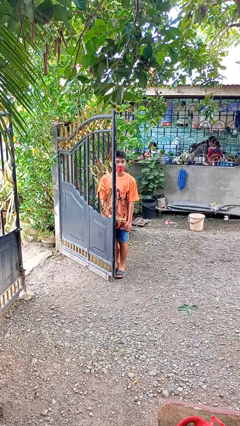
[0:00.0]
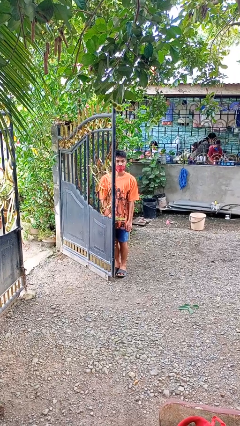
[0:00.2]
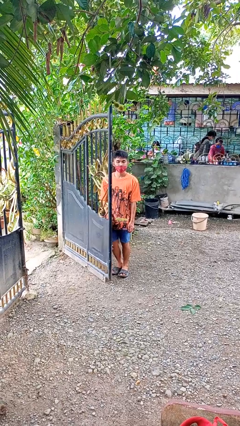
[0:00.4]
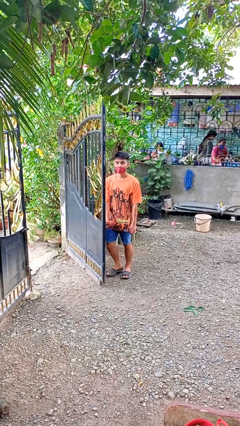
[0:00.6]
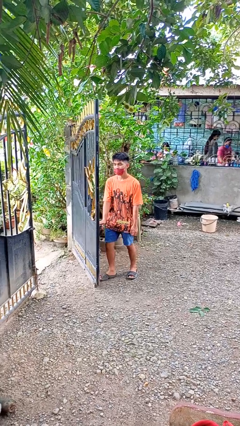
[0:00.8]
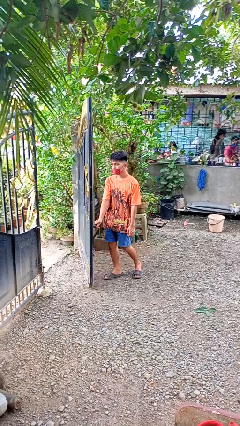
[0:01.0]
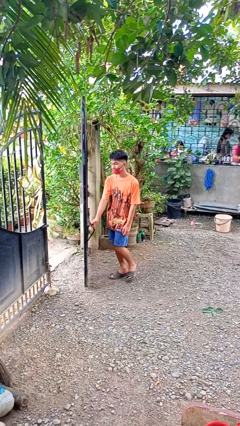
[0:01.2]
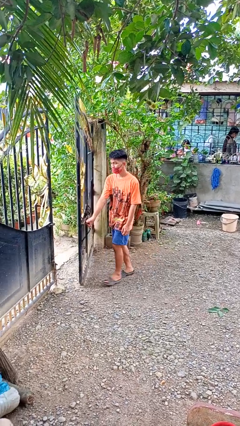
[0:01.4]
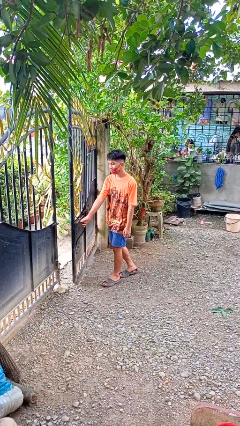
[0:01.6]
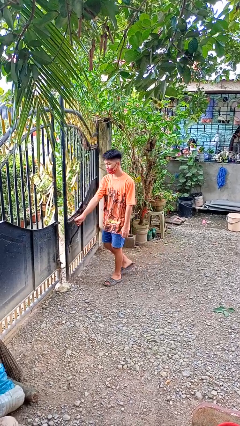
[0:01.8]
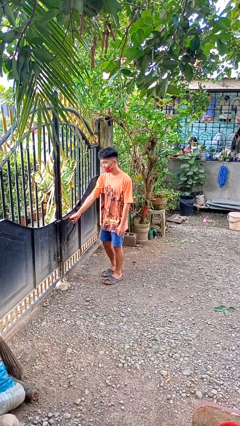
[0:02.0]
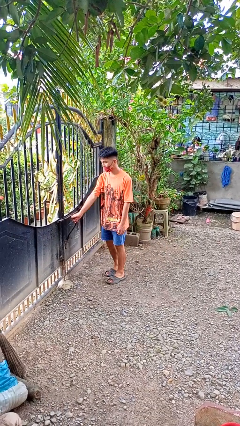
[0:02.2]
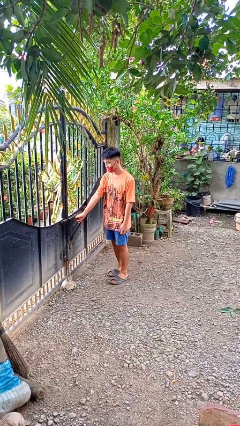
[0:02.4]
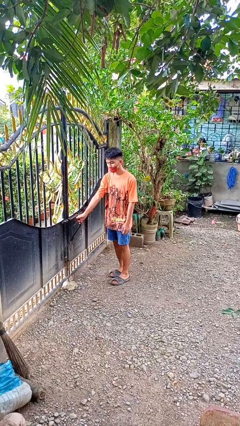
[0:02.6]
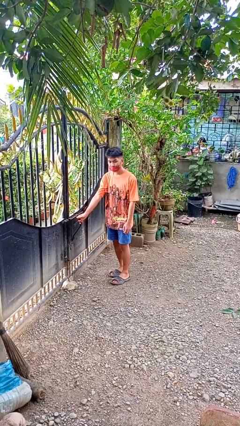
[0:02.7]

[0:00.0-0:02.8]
person closes gate

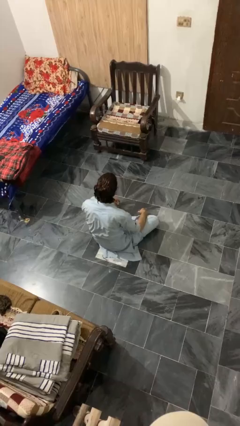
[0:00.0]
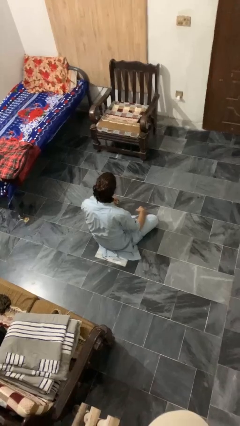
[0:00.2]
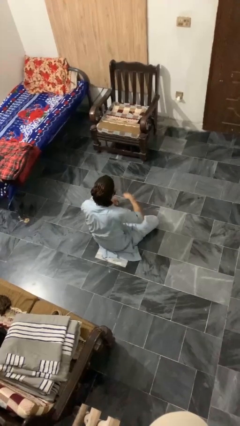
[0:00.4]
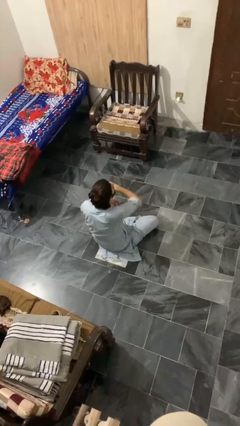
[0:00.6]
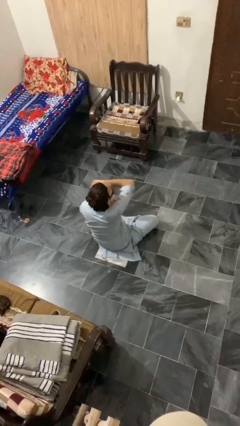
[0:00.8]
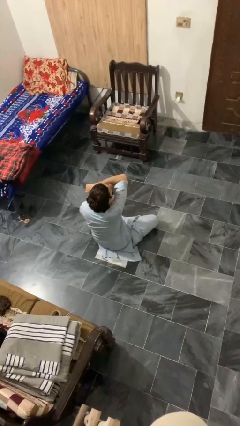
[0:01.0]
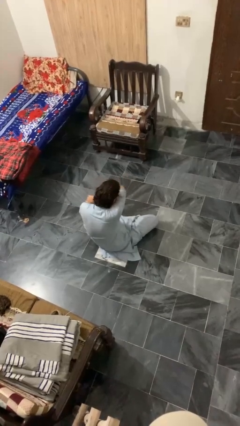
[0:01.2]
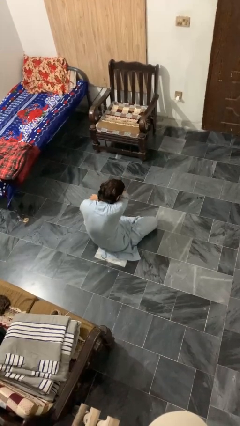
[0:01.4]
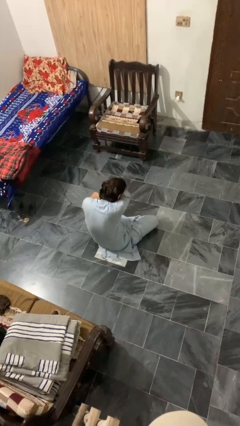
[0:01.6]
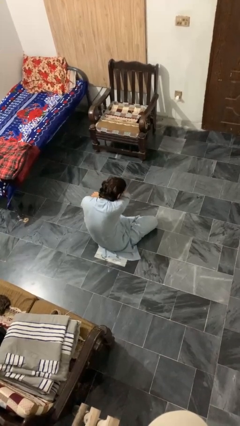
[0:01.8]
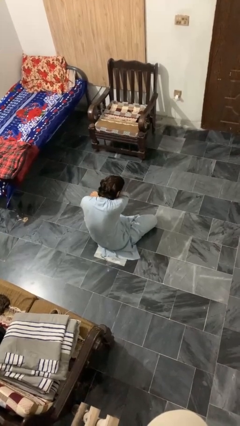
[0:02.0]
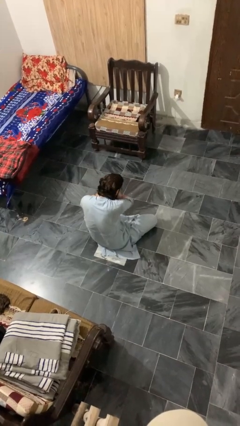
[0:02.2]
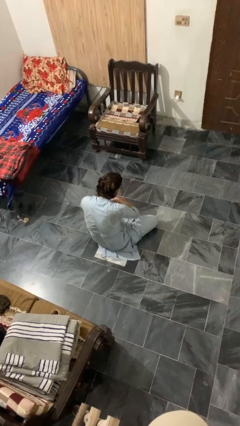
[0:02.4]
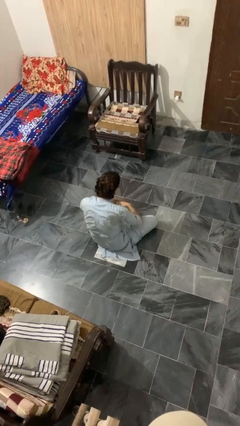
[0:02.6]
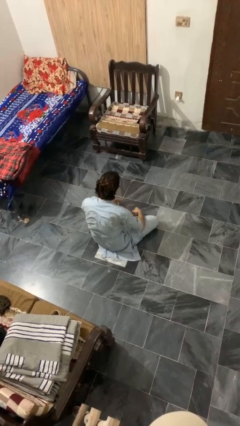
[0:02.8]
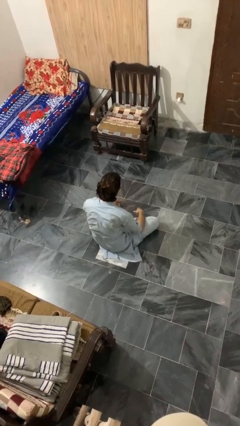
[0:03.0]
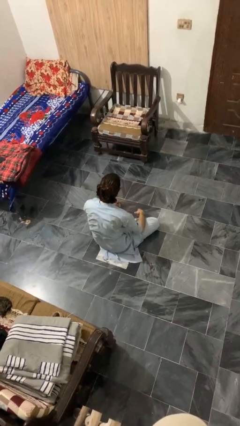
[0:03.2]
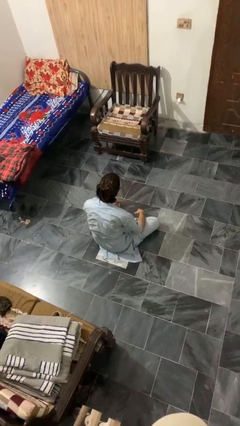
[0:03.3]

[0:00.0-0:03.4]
person sneezes into arm

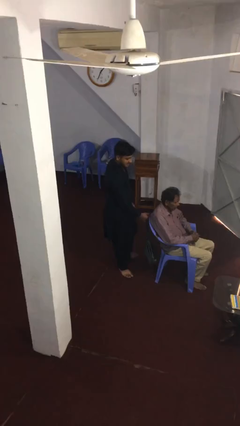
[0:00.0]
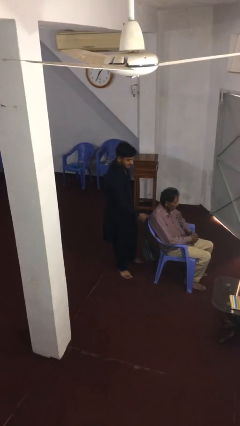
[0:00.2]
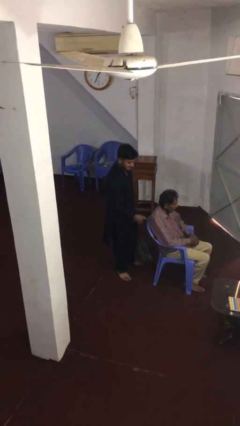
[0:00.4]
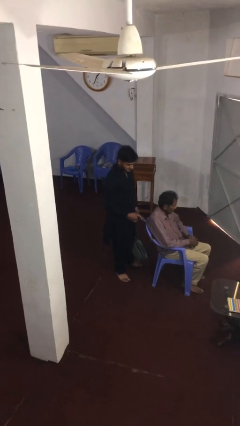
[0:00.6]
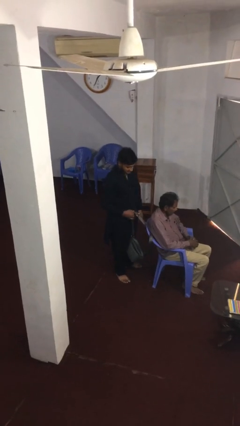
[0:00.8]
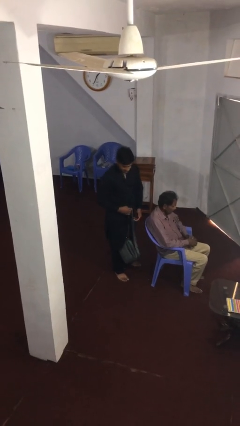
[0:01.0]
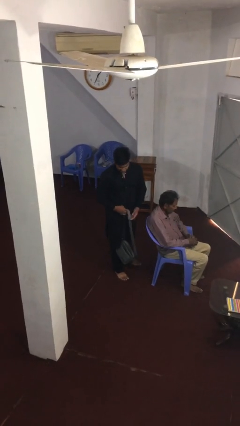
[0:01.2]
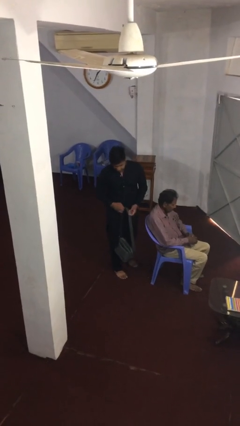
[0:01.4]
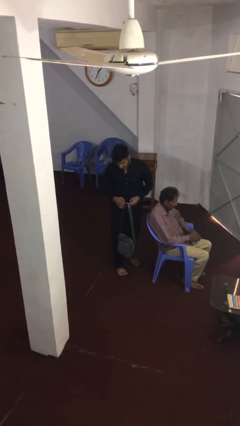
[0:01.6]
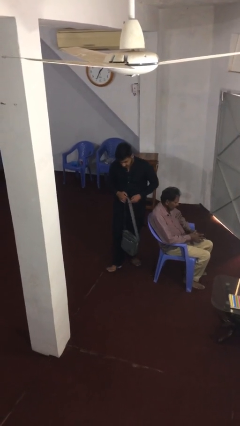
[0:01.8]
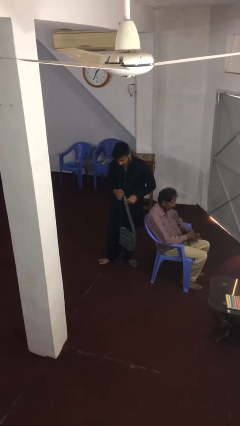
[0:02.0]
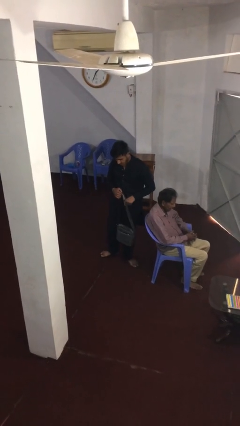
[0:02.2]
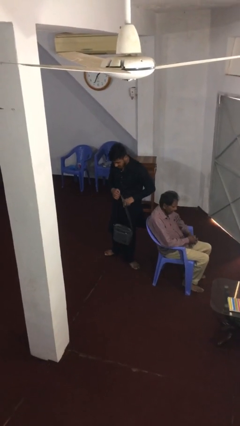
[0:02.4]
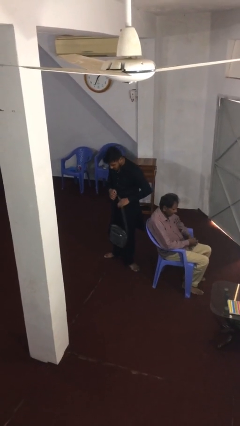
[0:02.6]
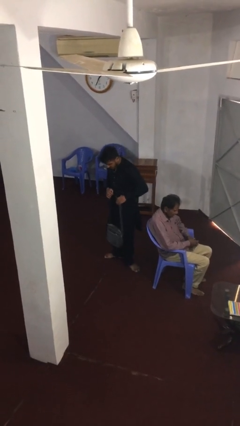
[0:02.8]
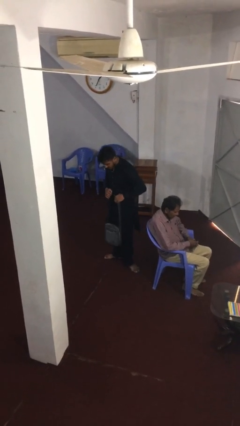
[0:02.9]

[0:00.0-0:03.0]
person steals object from person

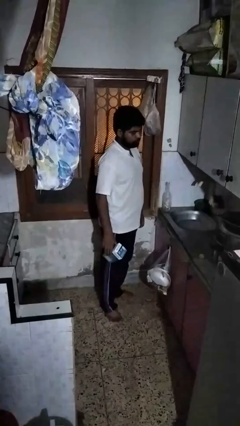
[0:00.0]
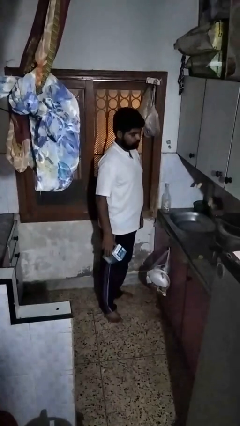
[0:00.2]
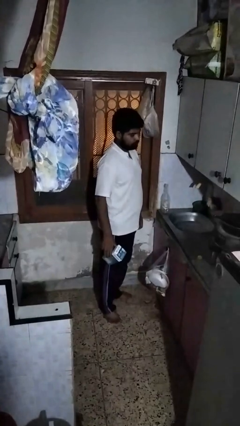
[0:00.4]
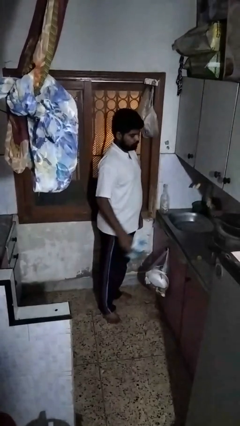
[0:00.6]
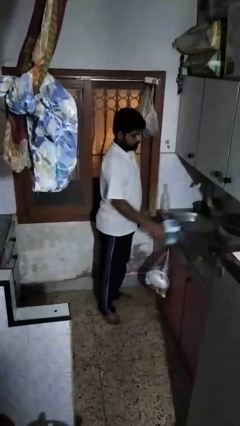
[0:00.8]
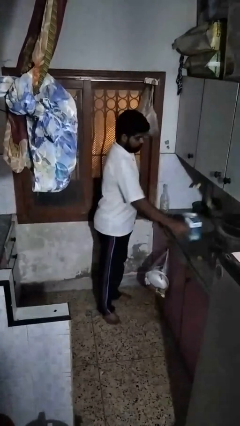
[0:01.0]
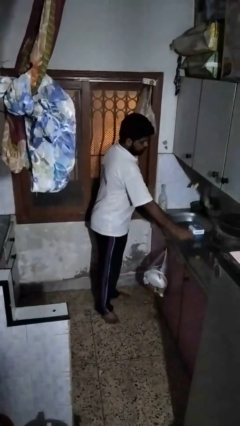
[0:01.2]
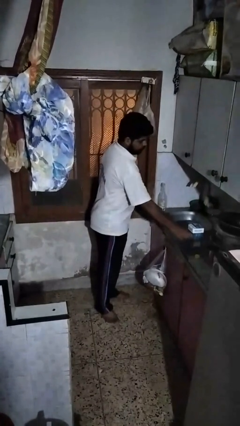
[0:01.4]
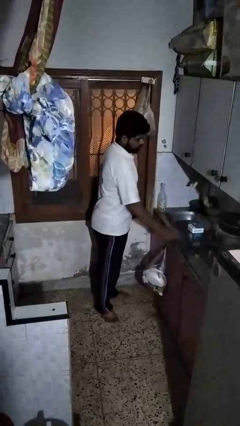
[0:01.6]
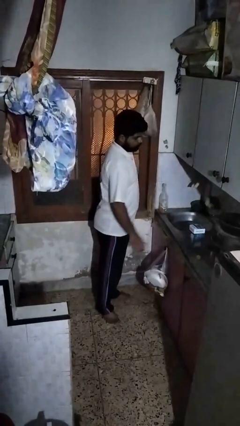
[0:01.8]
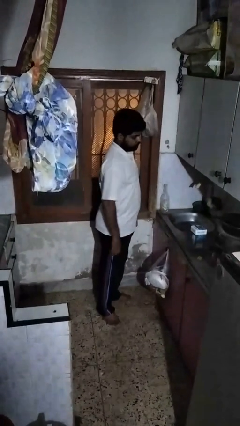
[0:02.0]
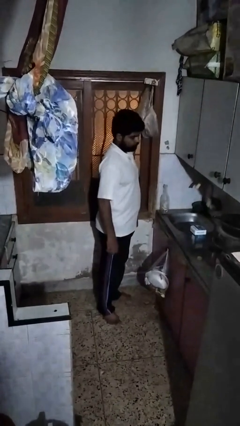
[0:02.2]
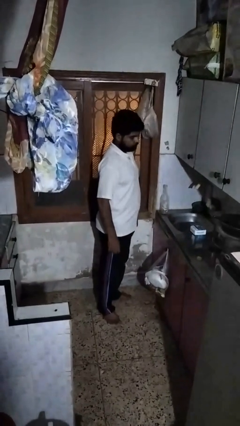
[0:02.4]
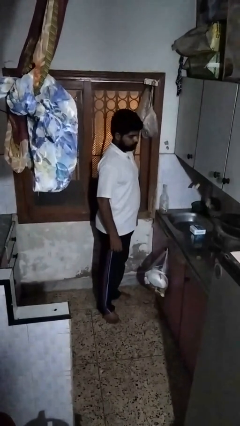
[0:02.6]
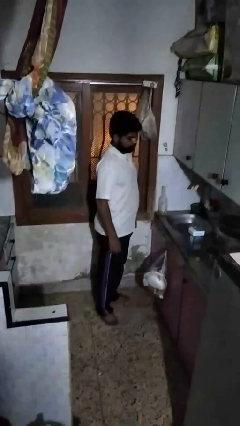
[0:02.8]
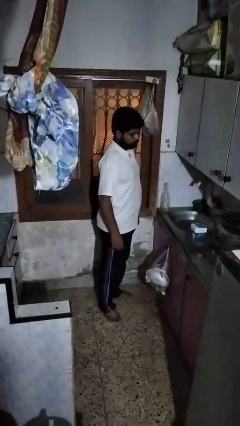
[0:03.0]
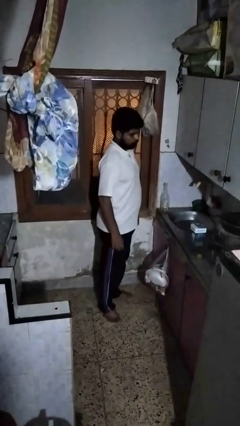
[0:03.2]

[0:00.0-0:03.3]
person puts down object on countertop

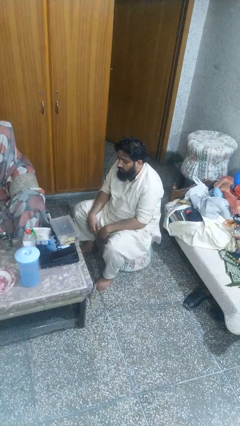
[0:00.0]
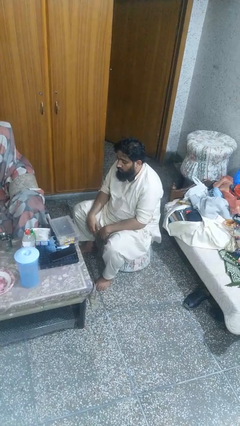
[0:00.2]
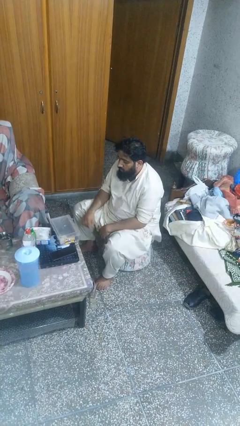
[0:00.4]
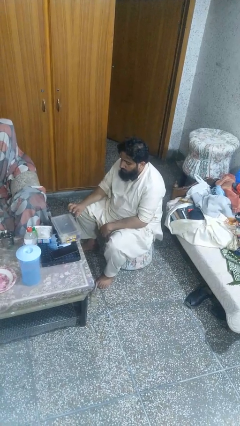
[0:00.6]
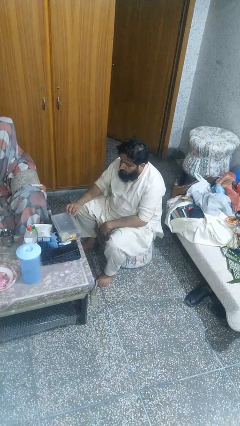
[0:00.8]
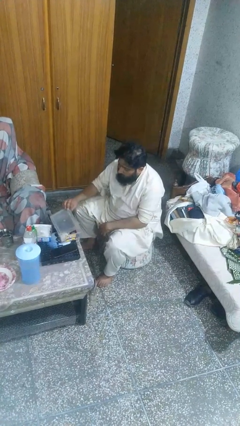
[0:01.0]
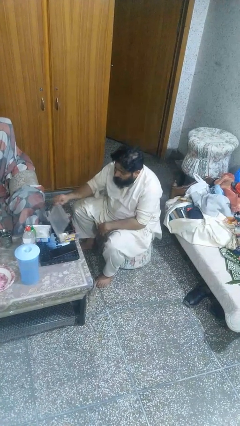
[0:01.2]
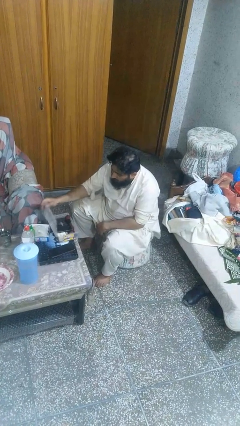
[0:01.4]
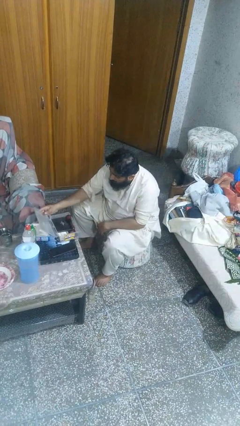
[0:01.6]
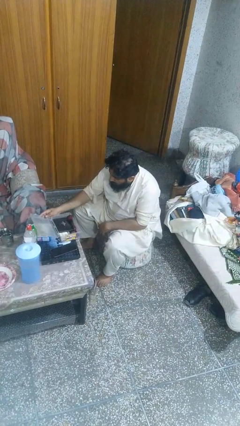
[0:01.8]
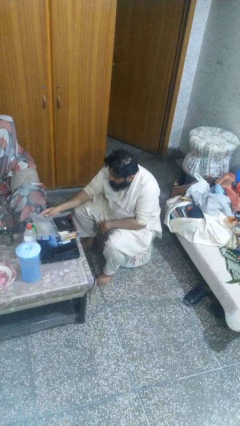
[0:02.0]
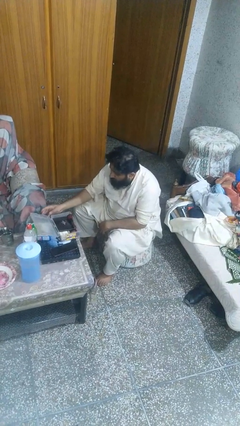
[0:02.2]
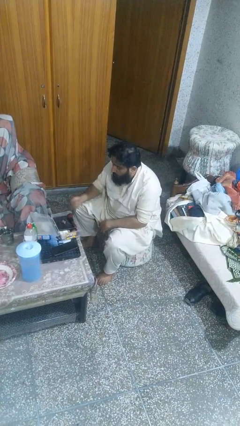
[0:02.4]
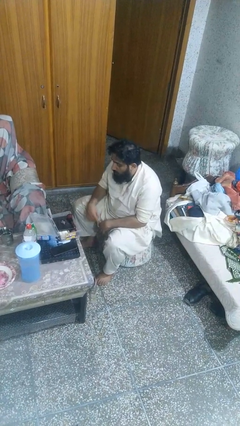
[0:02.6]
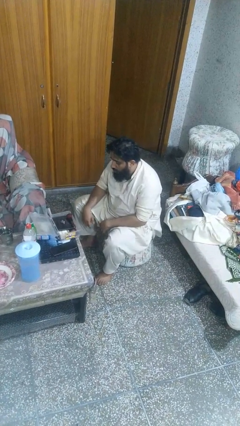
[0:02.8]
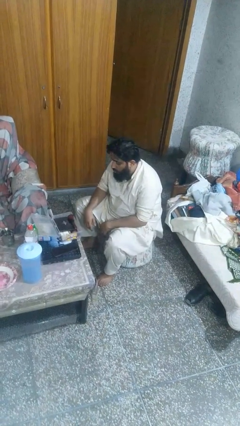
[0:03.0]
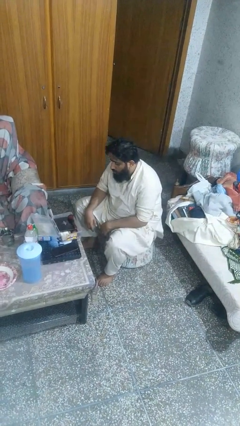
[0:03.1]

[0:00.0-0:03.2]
person opens jewelry box

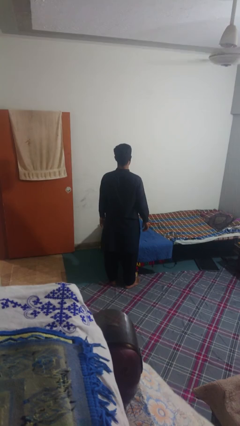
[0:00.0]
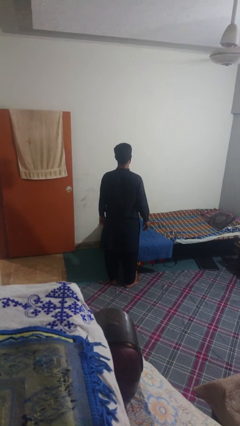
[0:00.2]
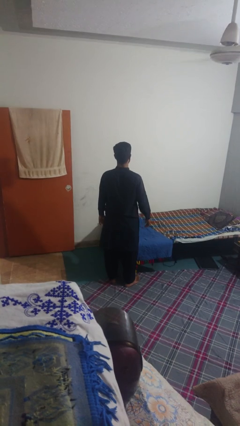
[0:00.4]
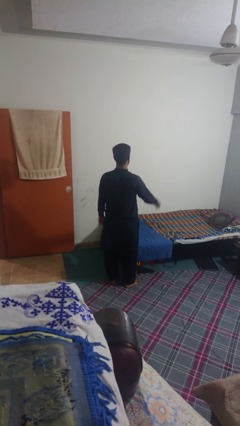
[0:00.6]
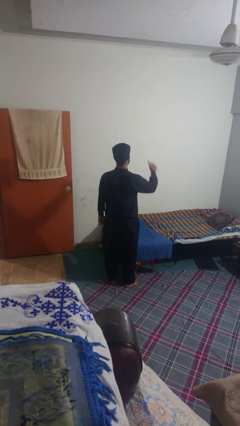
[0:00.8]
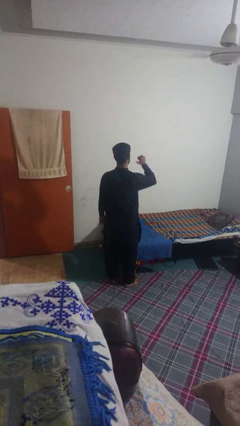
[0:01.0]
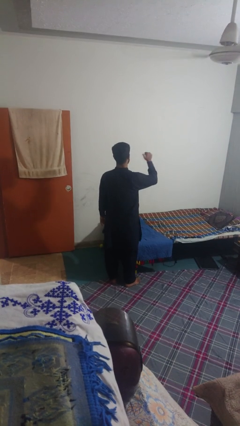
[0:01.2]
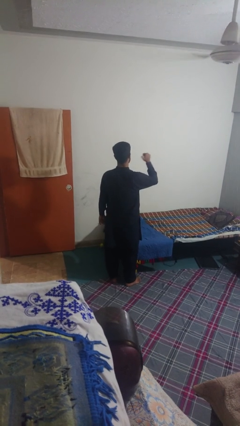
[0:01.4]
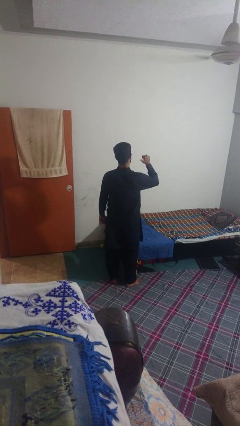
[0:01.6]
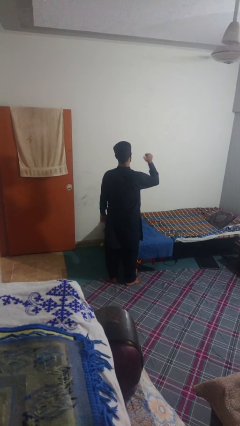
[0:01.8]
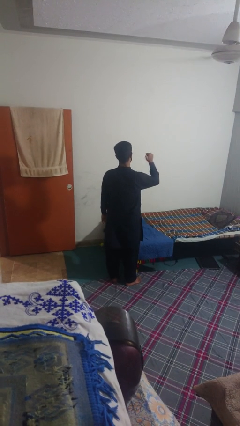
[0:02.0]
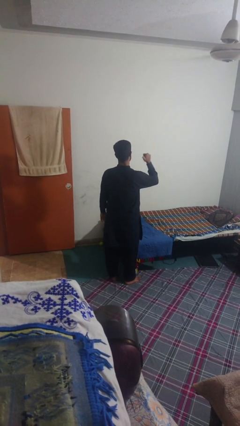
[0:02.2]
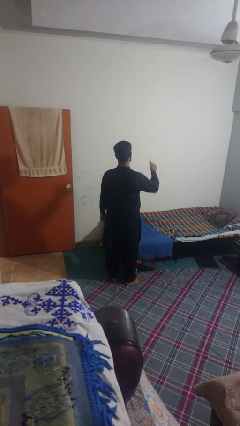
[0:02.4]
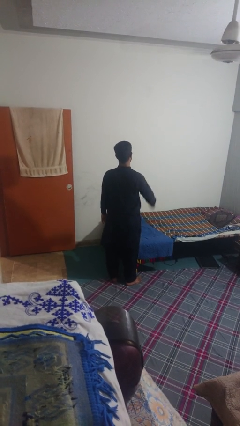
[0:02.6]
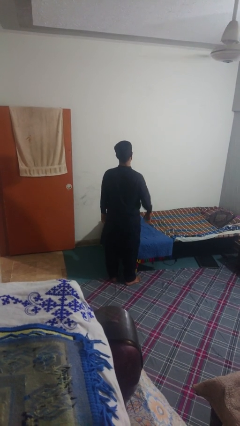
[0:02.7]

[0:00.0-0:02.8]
person gestures behind me
